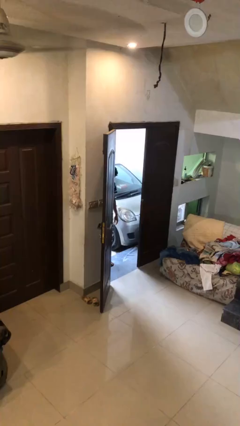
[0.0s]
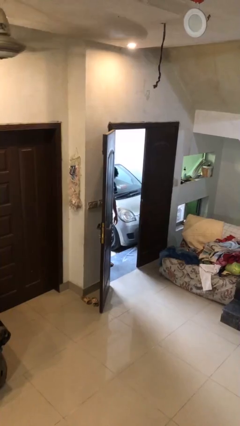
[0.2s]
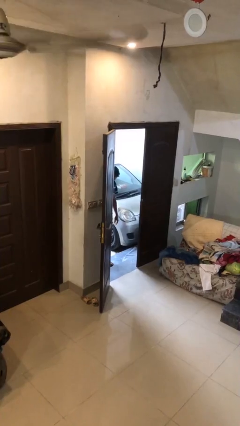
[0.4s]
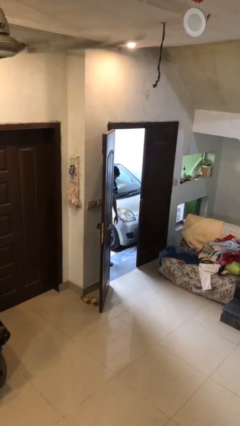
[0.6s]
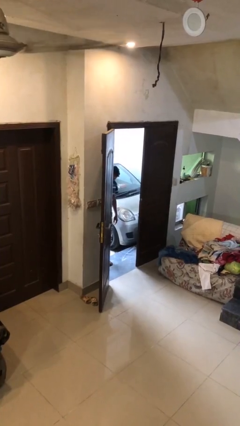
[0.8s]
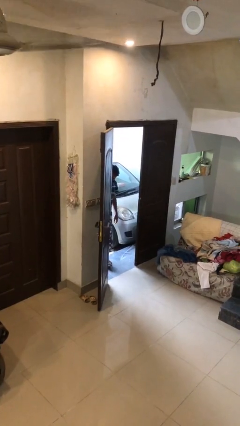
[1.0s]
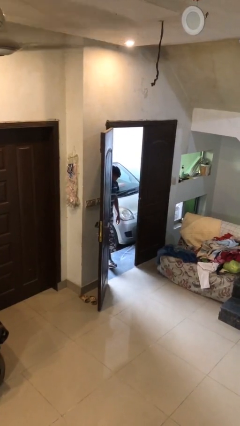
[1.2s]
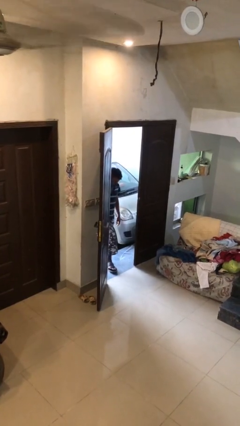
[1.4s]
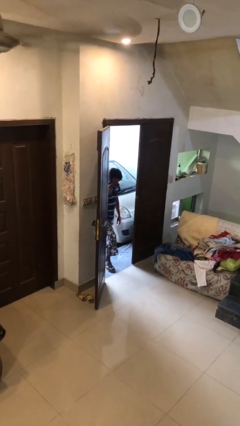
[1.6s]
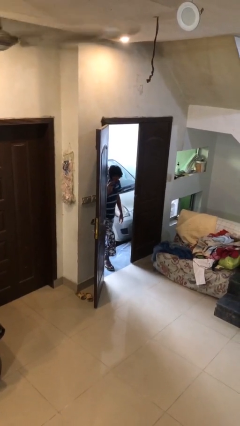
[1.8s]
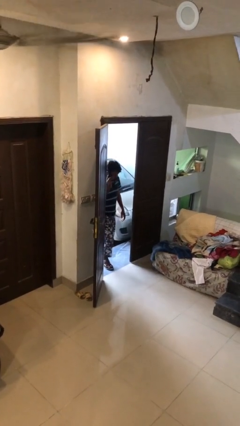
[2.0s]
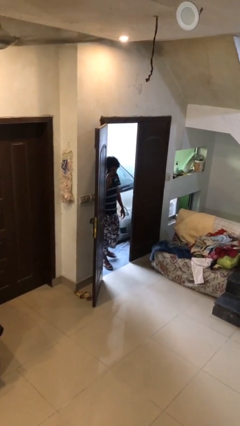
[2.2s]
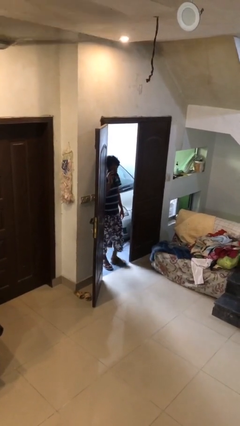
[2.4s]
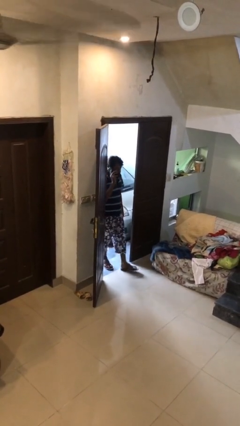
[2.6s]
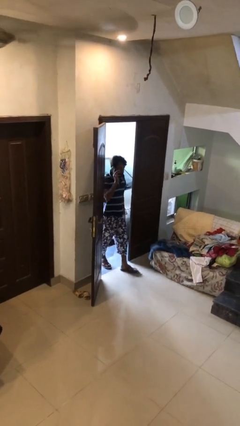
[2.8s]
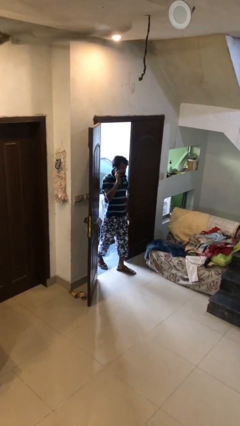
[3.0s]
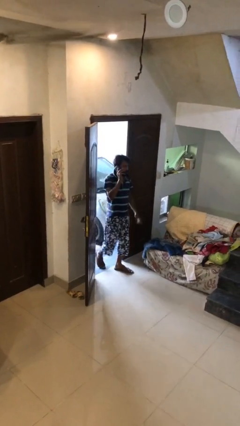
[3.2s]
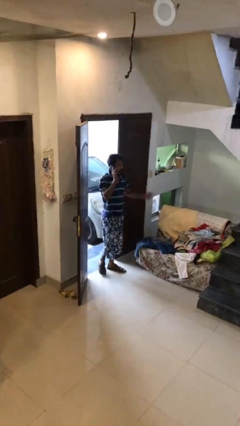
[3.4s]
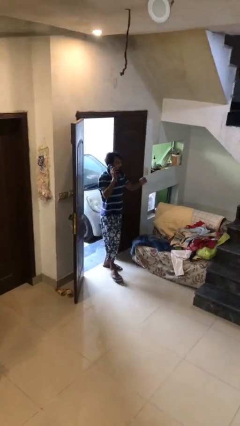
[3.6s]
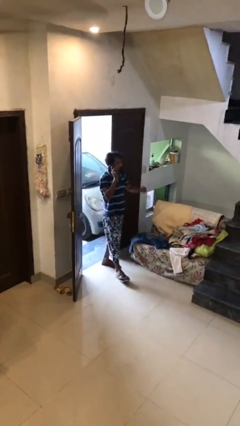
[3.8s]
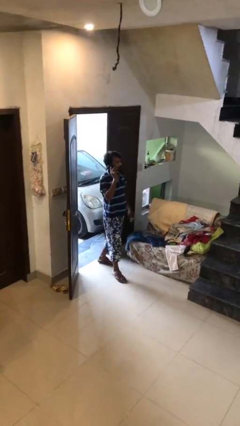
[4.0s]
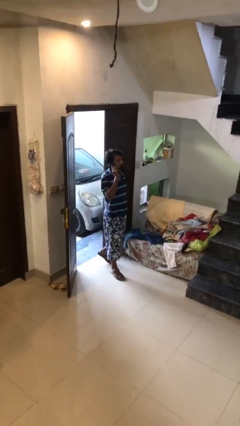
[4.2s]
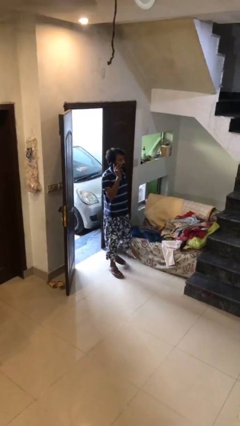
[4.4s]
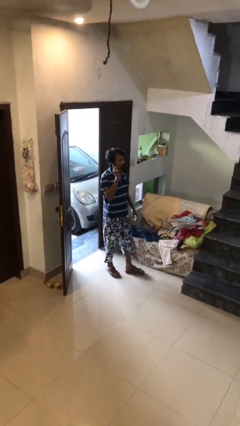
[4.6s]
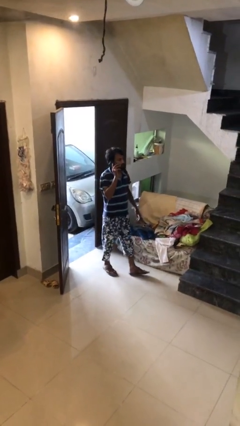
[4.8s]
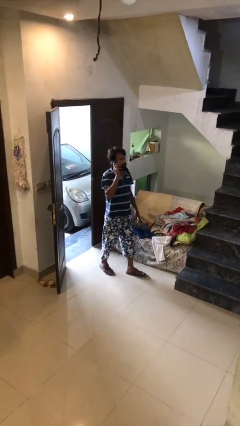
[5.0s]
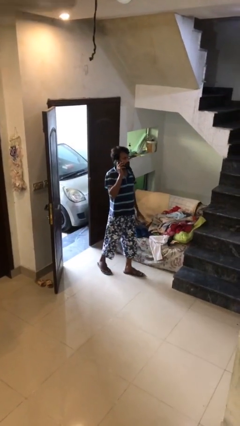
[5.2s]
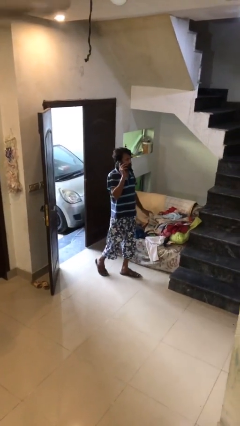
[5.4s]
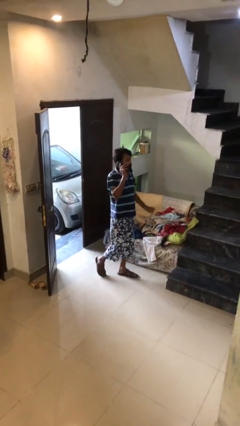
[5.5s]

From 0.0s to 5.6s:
person enters scene through structure

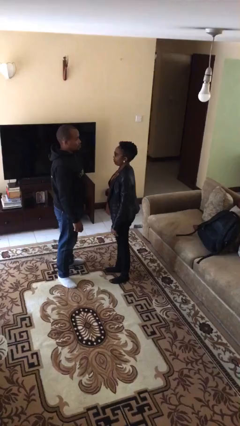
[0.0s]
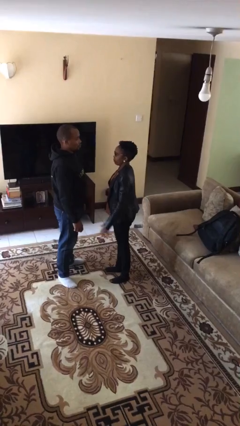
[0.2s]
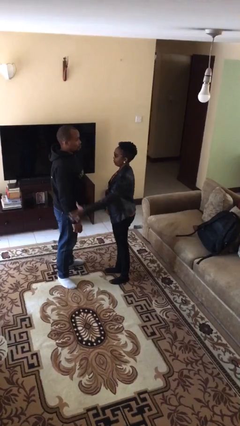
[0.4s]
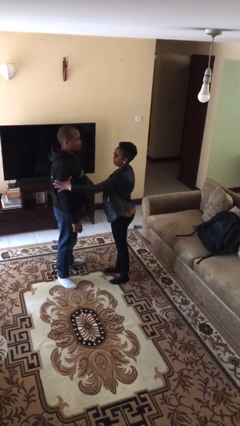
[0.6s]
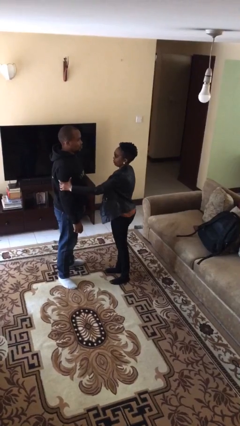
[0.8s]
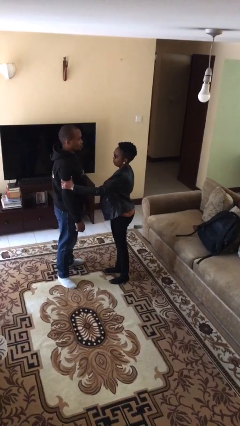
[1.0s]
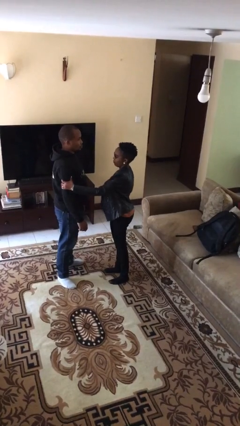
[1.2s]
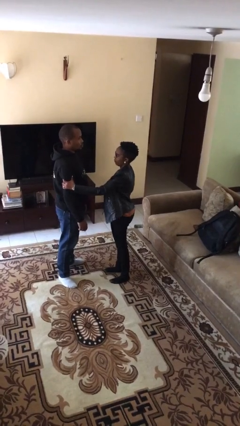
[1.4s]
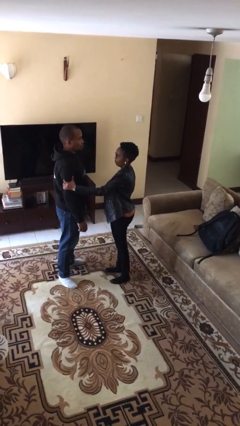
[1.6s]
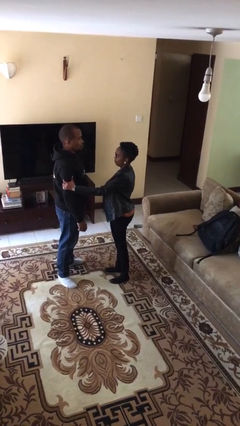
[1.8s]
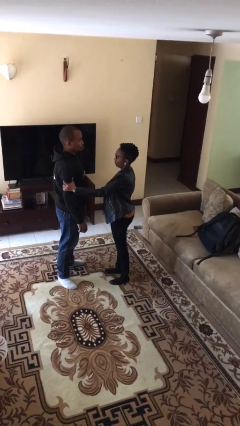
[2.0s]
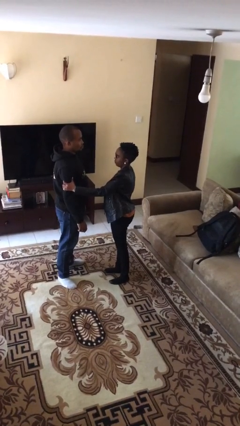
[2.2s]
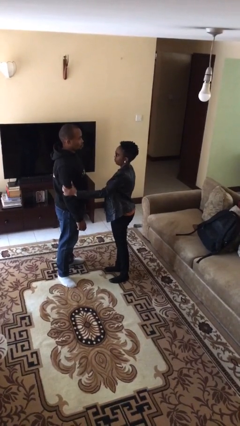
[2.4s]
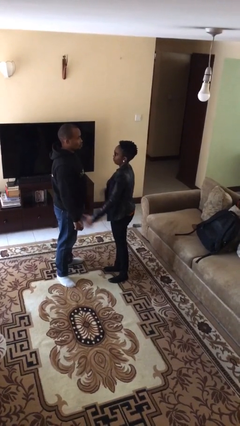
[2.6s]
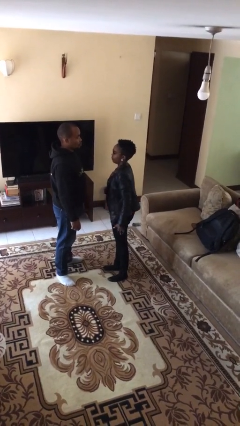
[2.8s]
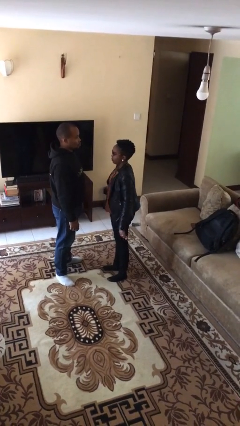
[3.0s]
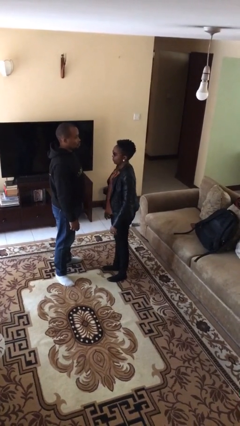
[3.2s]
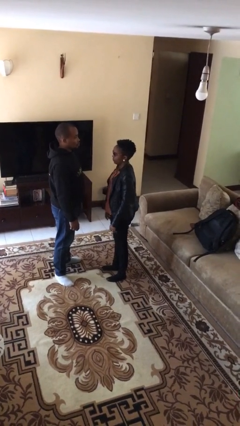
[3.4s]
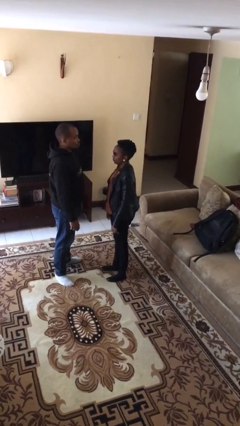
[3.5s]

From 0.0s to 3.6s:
person grabs person by bicep

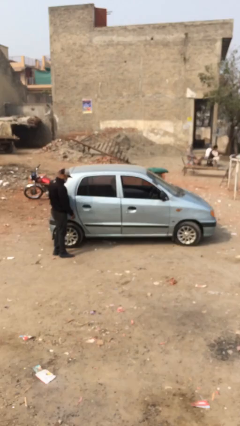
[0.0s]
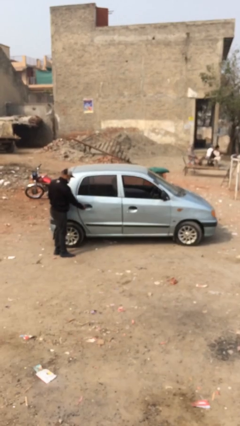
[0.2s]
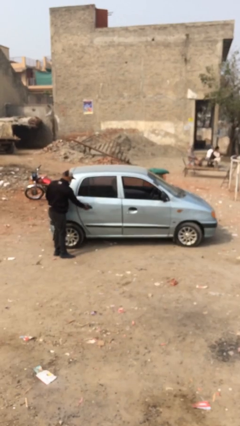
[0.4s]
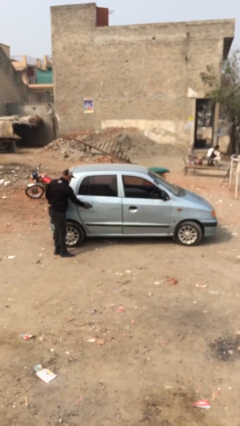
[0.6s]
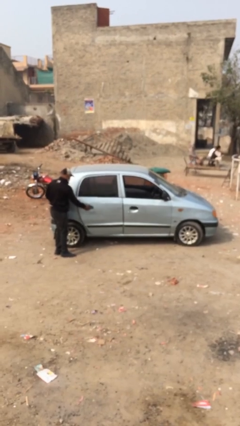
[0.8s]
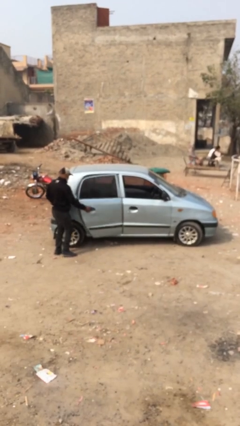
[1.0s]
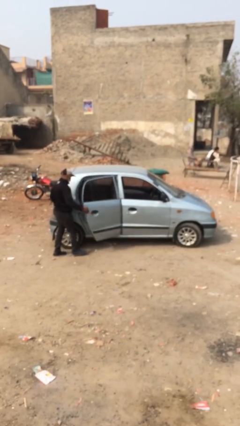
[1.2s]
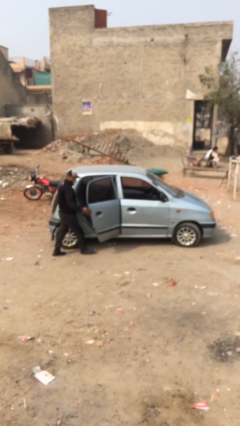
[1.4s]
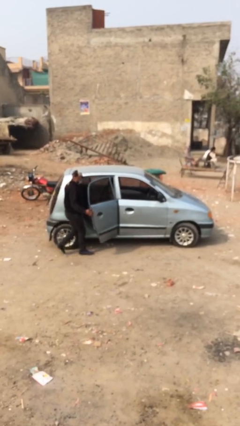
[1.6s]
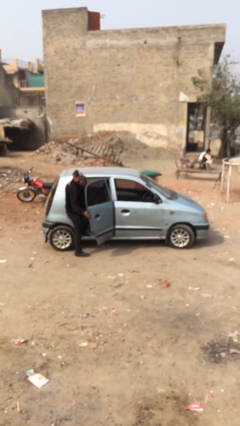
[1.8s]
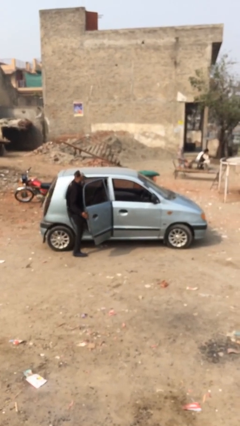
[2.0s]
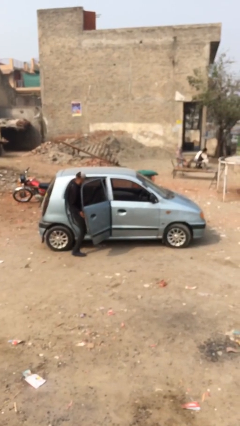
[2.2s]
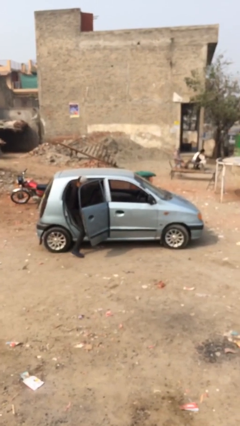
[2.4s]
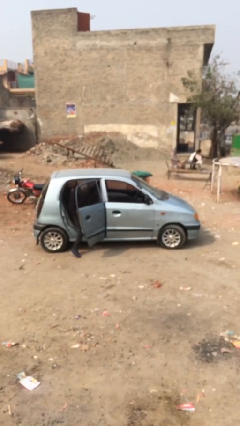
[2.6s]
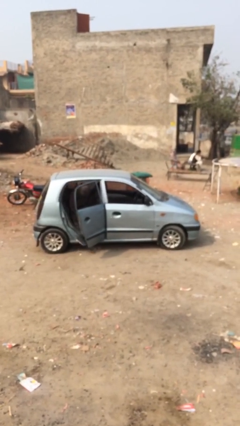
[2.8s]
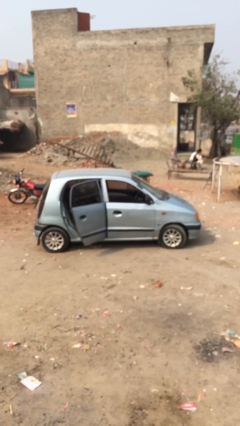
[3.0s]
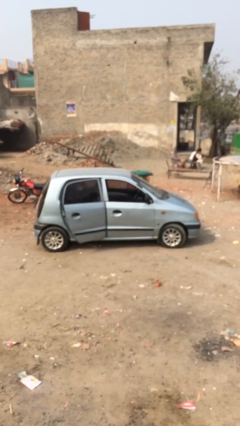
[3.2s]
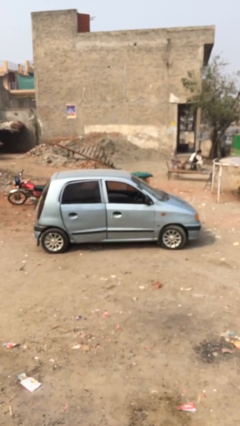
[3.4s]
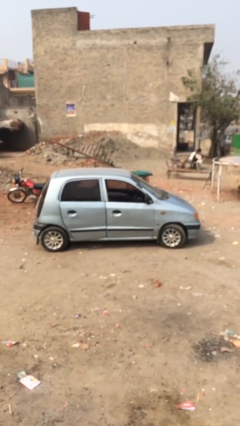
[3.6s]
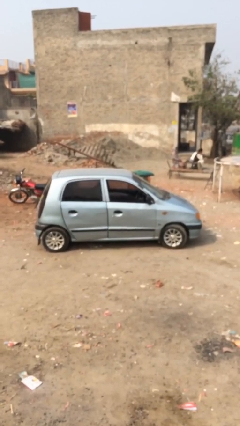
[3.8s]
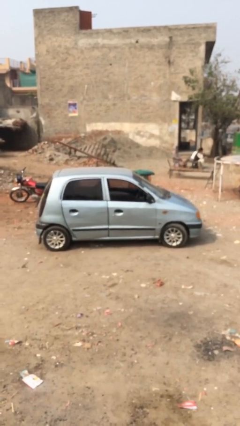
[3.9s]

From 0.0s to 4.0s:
car picks up person

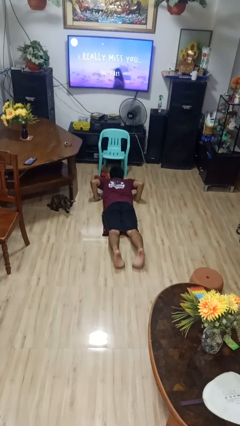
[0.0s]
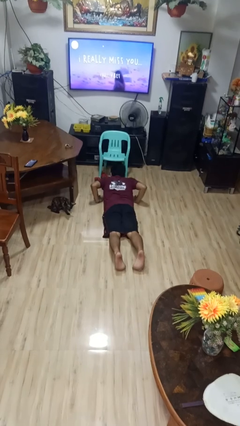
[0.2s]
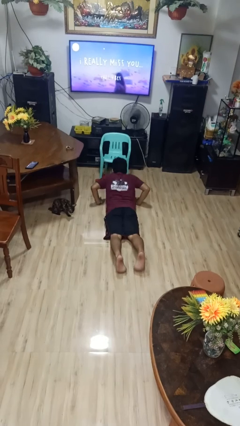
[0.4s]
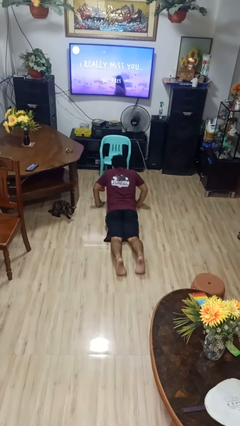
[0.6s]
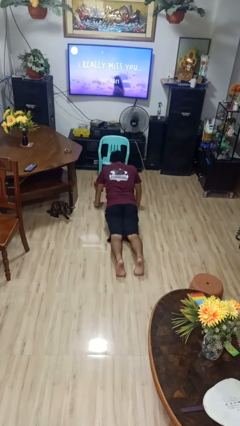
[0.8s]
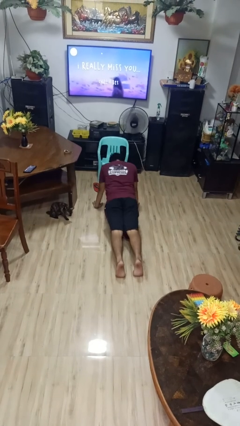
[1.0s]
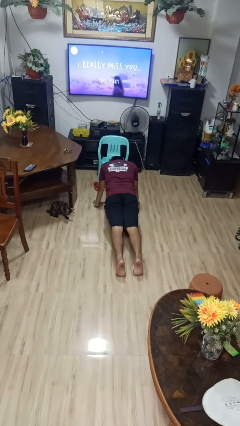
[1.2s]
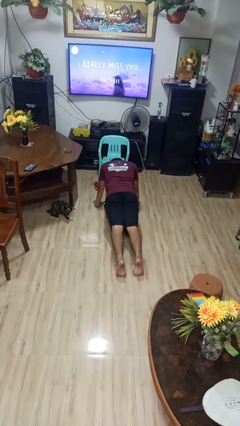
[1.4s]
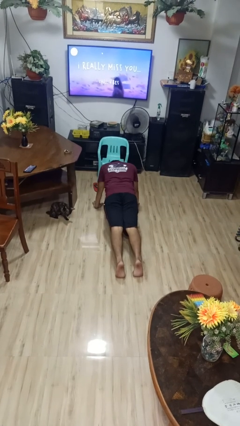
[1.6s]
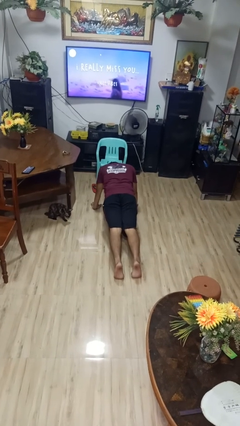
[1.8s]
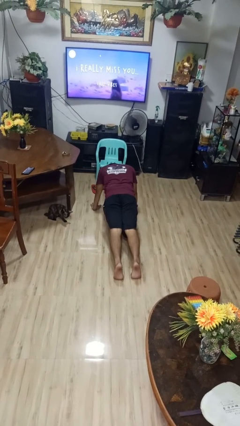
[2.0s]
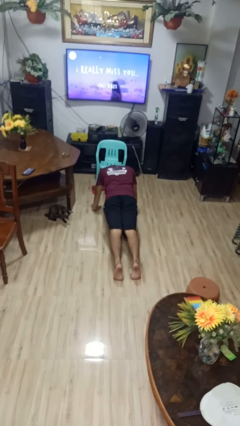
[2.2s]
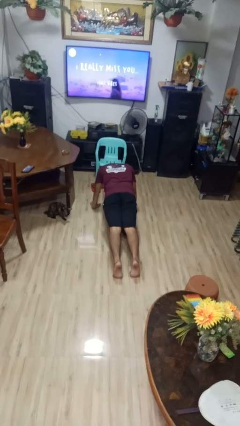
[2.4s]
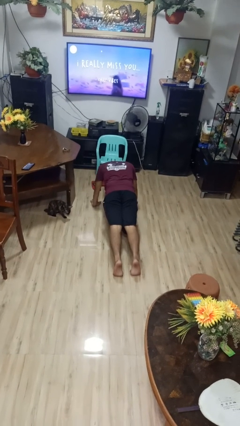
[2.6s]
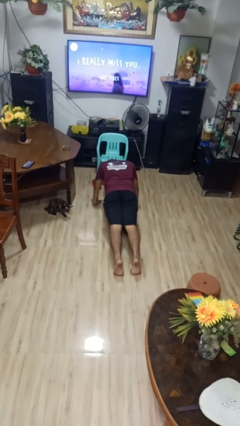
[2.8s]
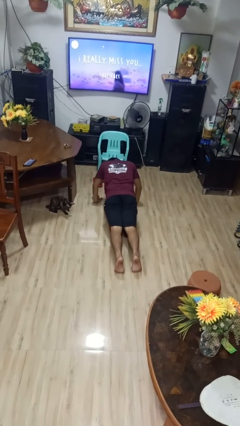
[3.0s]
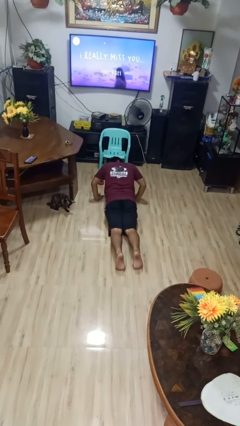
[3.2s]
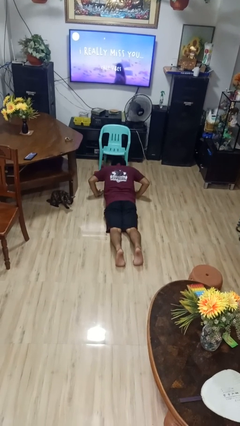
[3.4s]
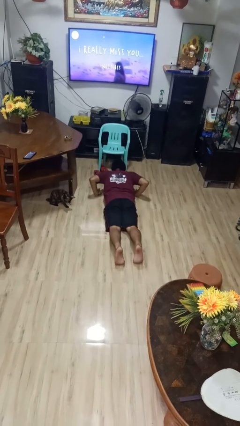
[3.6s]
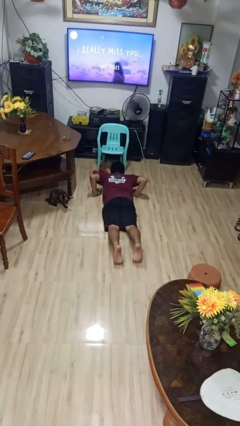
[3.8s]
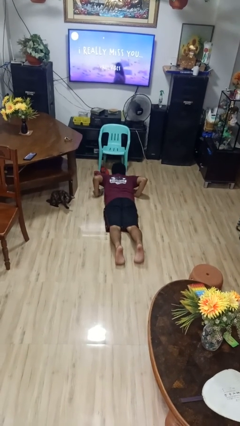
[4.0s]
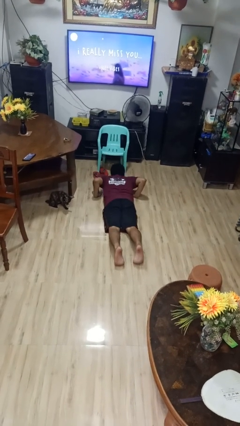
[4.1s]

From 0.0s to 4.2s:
person exercises with pushup
